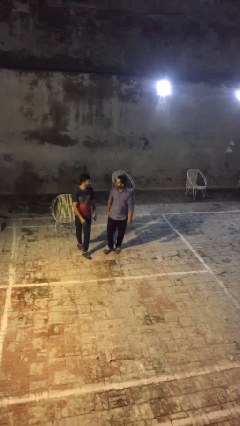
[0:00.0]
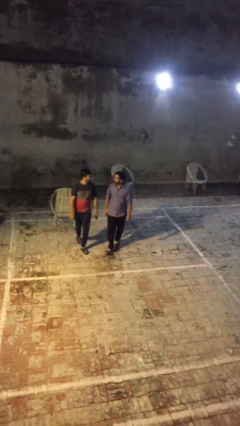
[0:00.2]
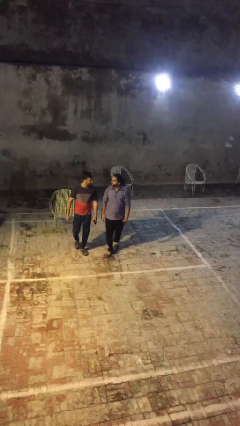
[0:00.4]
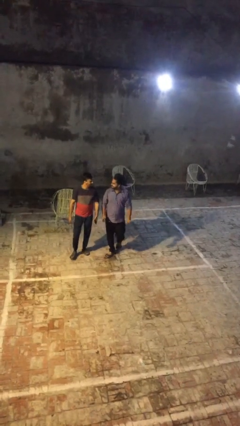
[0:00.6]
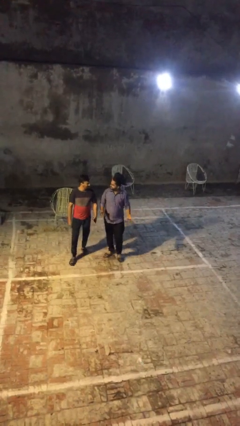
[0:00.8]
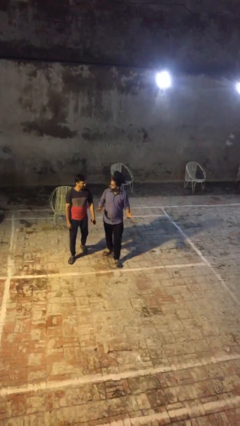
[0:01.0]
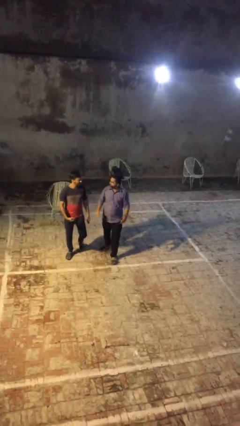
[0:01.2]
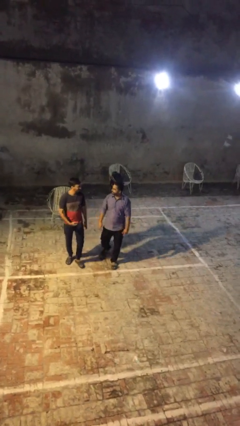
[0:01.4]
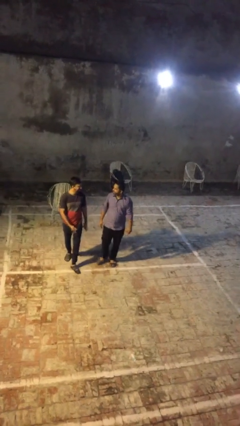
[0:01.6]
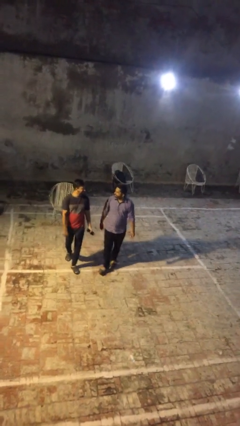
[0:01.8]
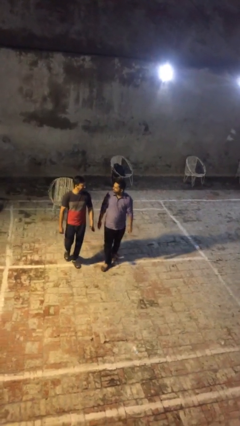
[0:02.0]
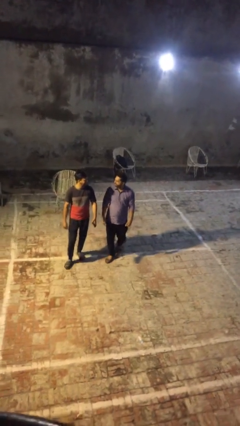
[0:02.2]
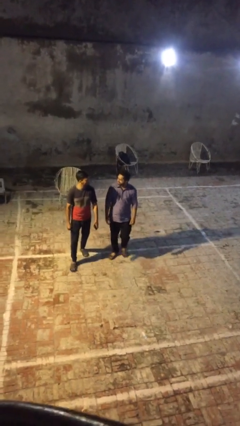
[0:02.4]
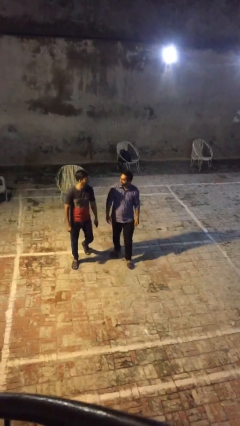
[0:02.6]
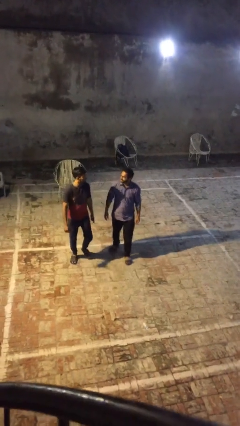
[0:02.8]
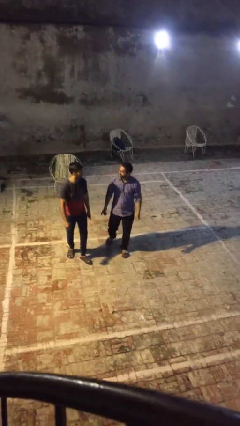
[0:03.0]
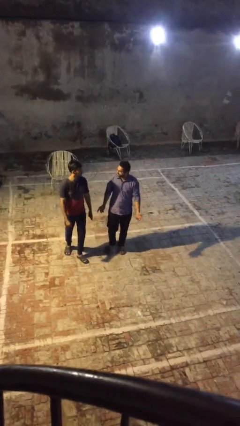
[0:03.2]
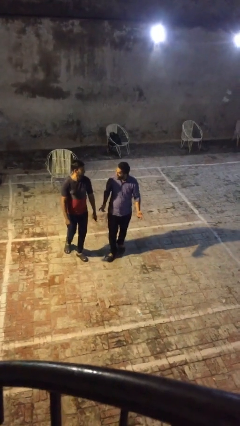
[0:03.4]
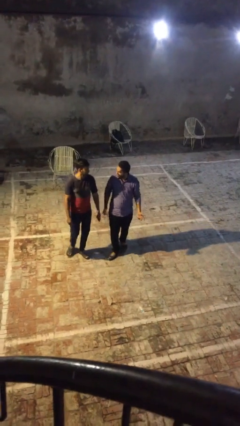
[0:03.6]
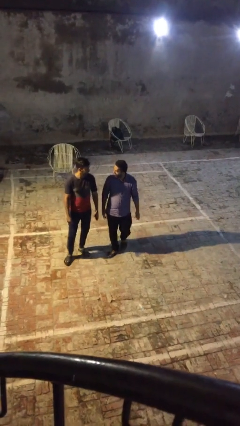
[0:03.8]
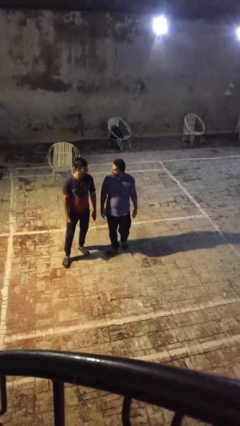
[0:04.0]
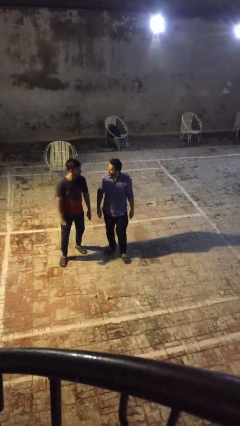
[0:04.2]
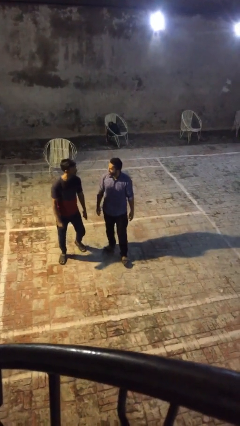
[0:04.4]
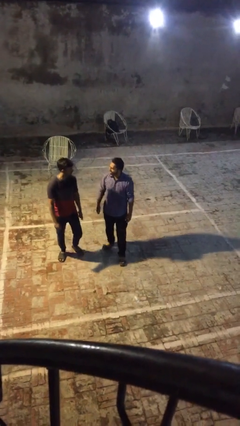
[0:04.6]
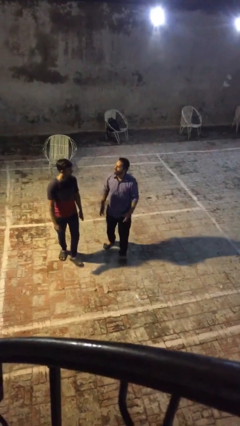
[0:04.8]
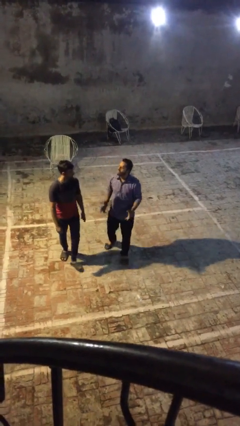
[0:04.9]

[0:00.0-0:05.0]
person talks to person

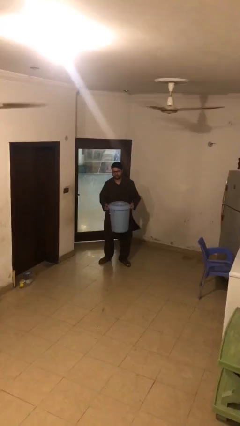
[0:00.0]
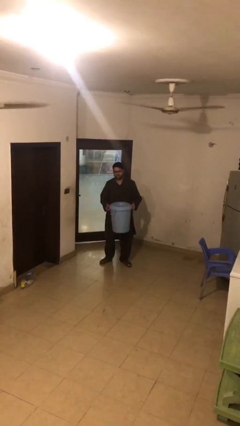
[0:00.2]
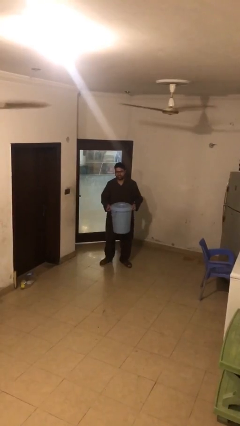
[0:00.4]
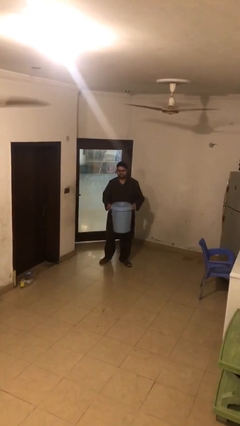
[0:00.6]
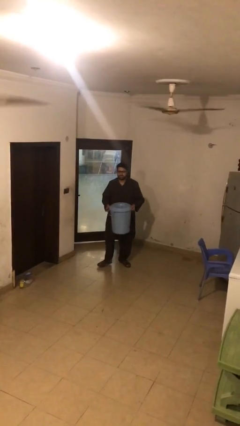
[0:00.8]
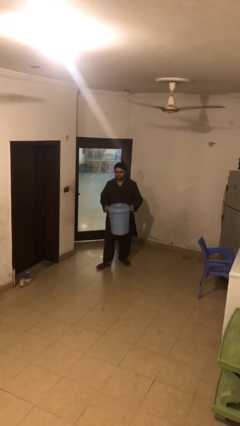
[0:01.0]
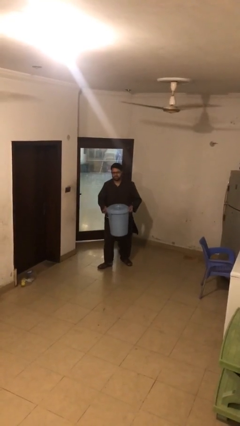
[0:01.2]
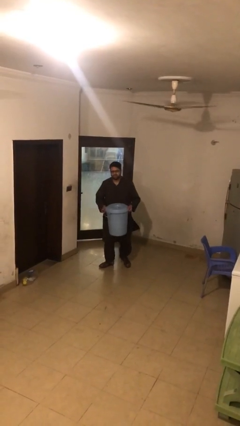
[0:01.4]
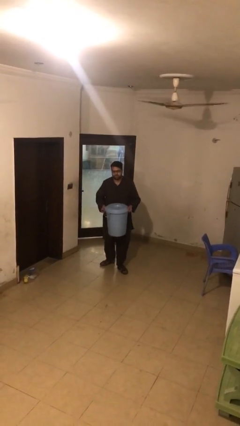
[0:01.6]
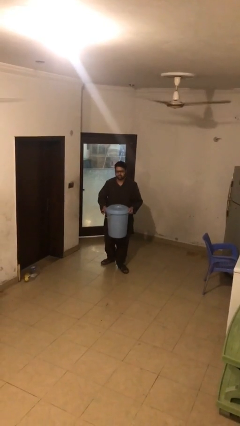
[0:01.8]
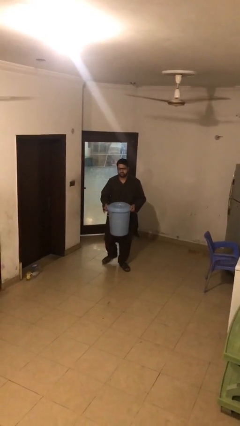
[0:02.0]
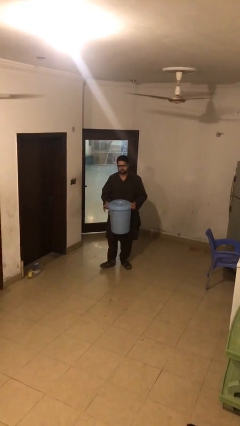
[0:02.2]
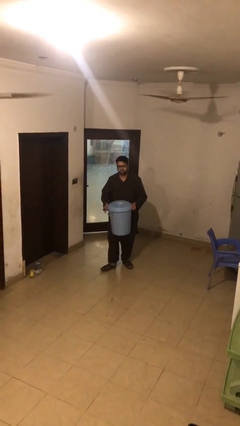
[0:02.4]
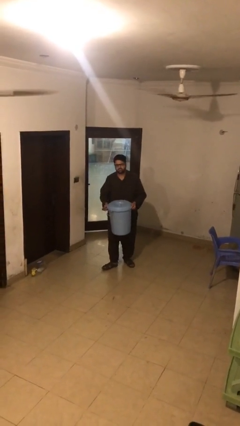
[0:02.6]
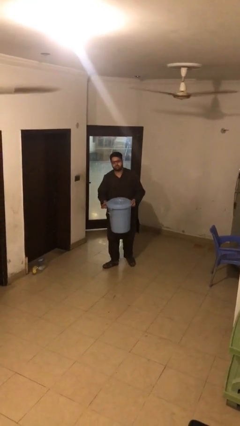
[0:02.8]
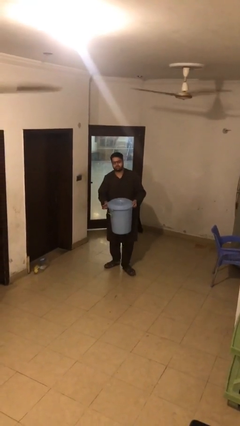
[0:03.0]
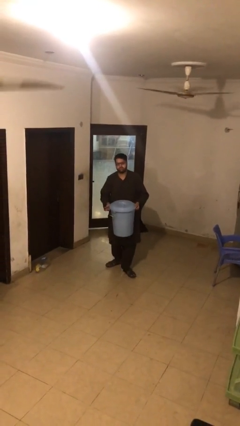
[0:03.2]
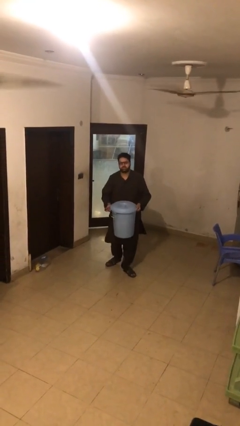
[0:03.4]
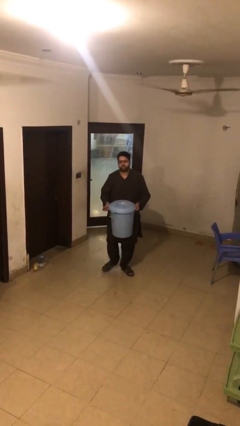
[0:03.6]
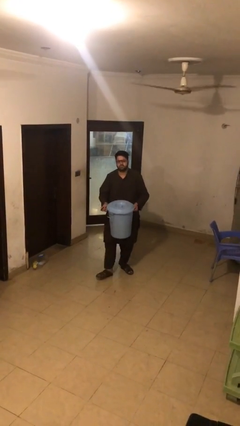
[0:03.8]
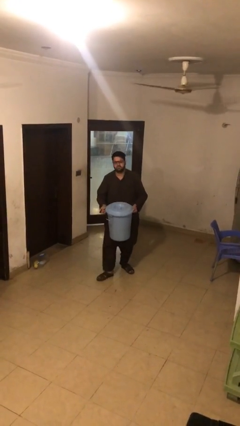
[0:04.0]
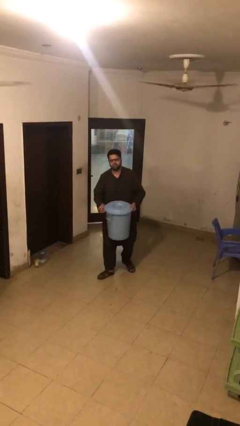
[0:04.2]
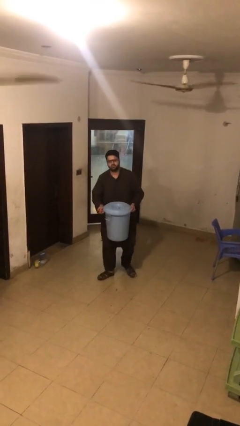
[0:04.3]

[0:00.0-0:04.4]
person carries heavy object

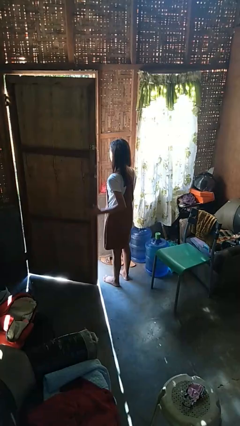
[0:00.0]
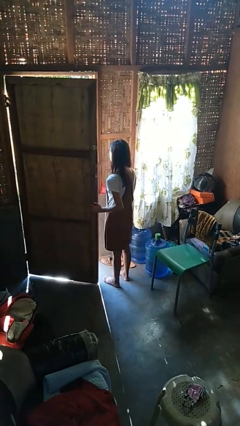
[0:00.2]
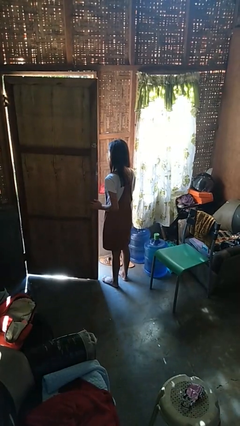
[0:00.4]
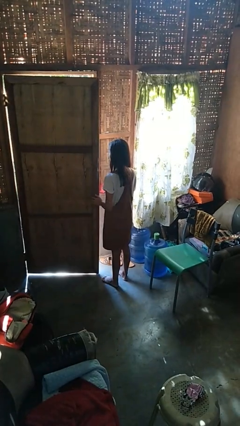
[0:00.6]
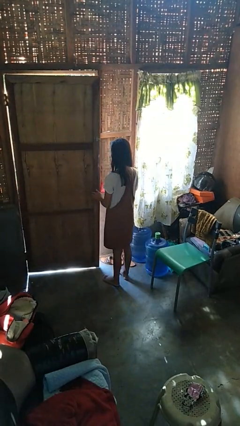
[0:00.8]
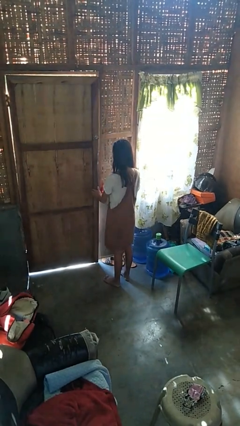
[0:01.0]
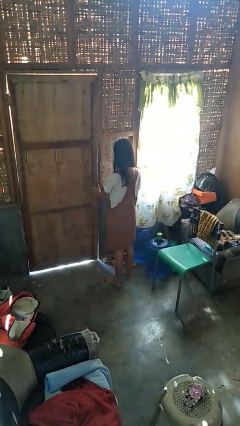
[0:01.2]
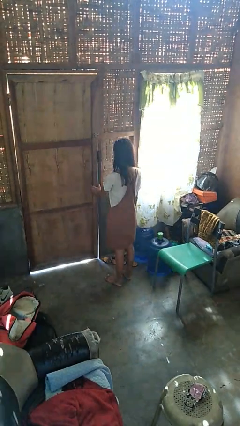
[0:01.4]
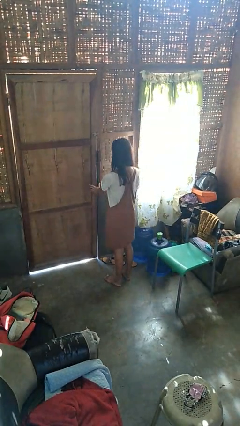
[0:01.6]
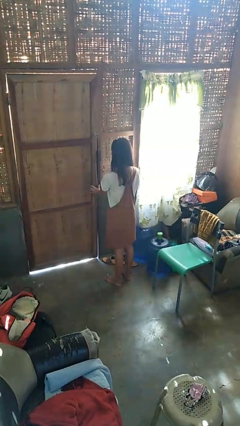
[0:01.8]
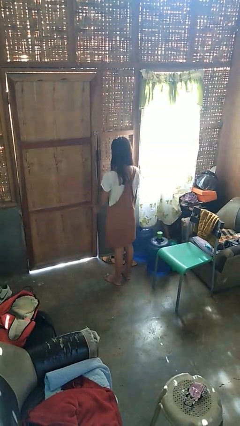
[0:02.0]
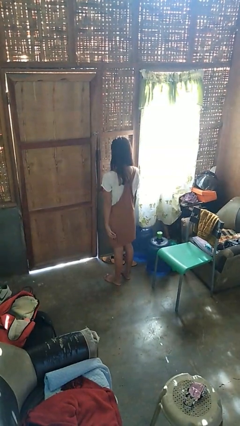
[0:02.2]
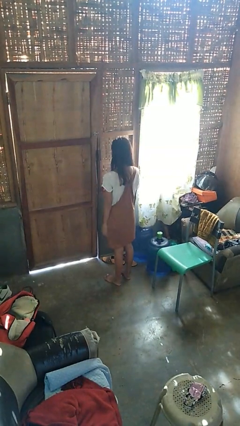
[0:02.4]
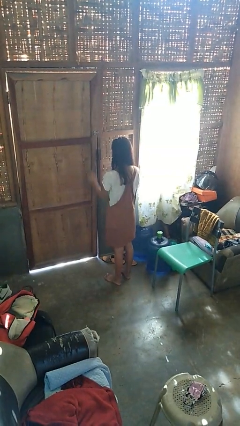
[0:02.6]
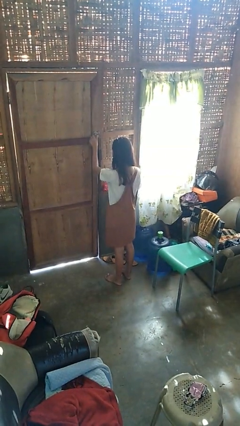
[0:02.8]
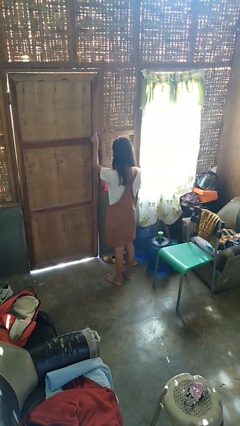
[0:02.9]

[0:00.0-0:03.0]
person closes facility door

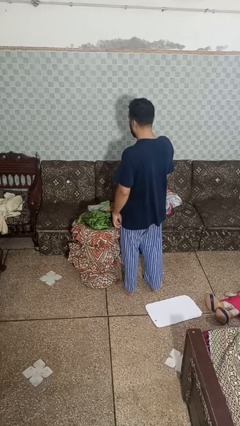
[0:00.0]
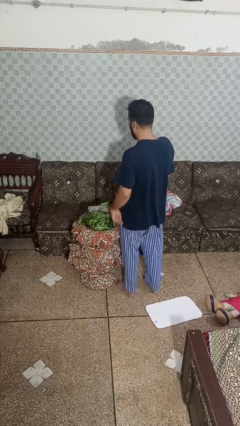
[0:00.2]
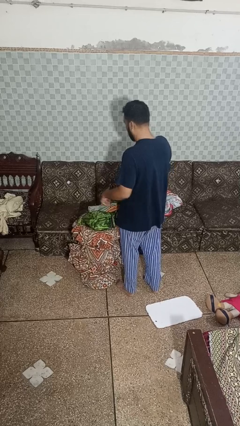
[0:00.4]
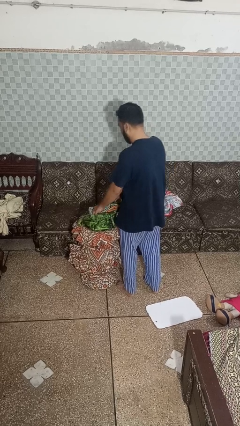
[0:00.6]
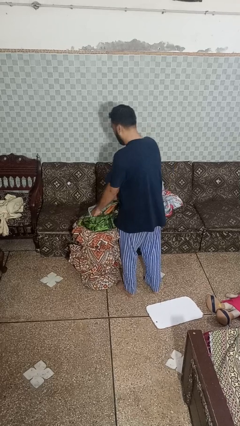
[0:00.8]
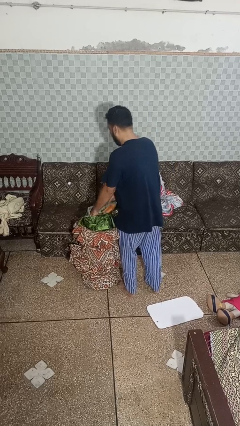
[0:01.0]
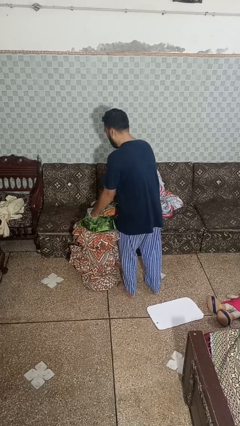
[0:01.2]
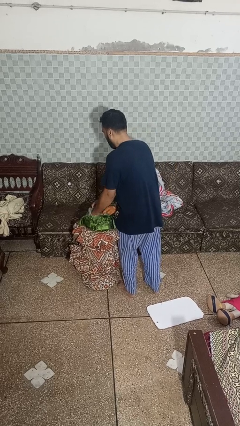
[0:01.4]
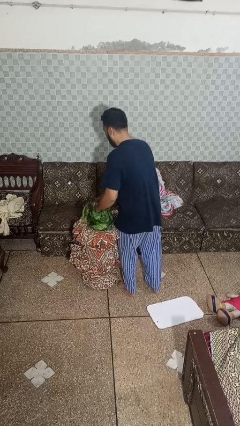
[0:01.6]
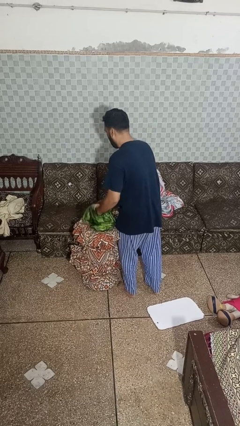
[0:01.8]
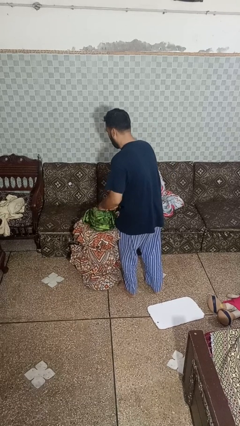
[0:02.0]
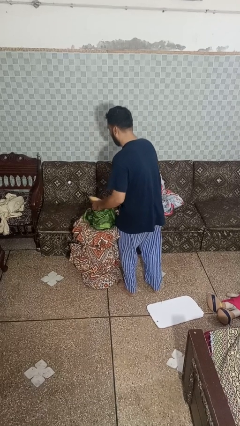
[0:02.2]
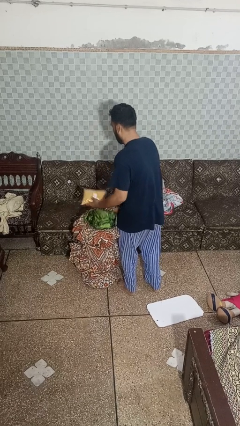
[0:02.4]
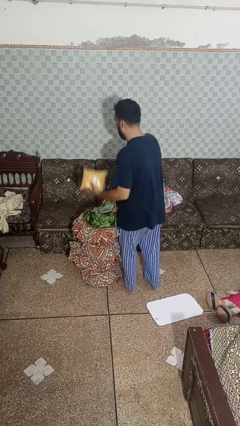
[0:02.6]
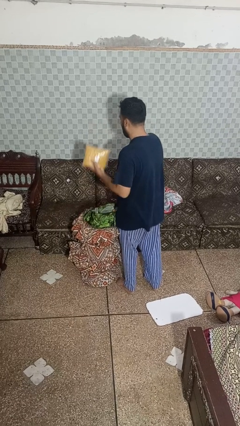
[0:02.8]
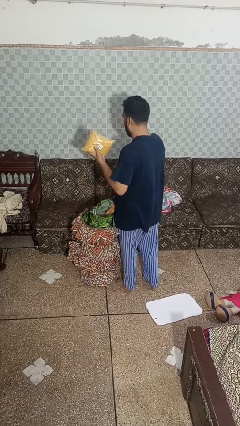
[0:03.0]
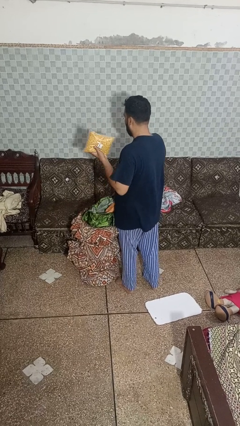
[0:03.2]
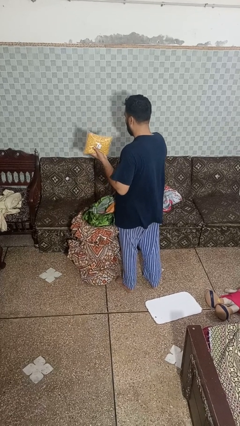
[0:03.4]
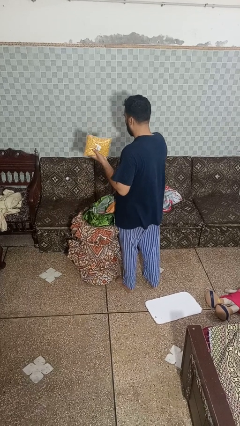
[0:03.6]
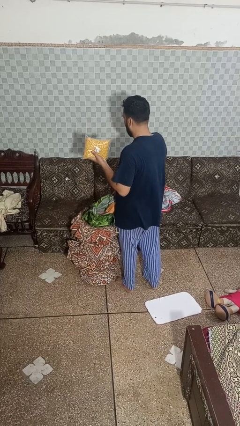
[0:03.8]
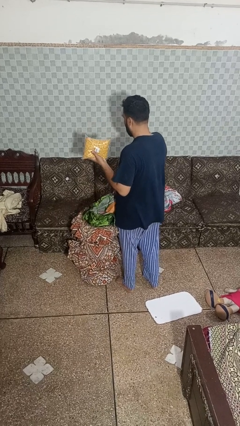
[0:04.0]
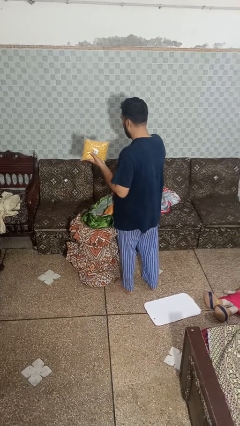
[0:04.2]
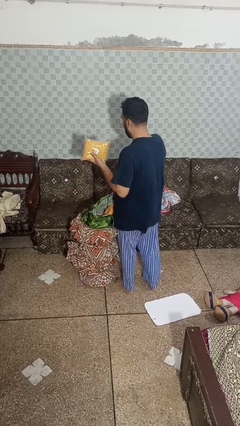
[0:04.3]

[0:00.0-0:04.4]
person takes object from bag

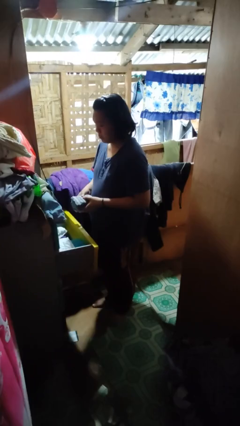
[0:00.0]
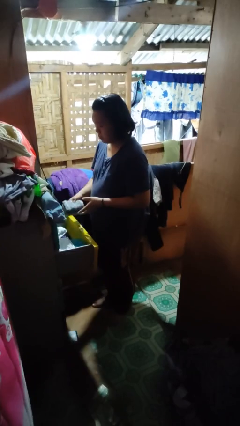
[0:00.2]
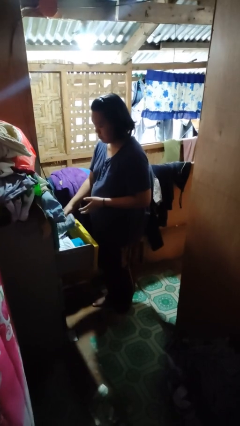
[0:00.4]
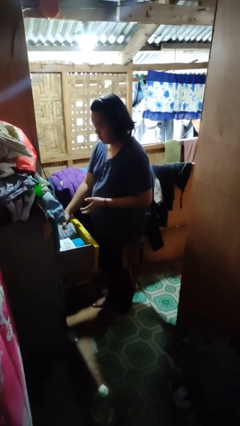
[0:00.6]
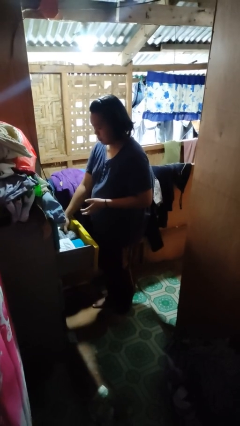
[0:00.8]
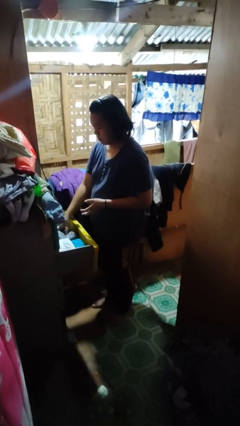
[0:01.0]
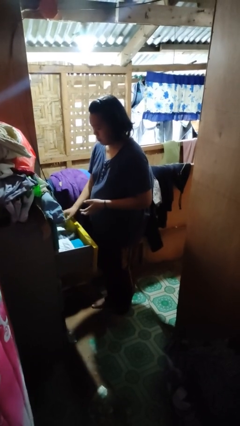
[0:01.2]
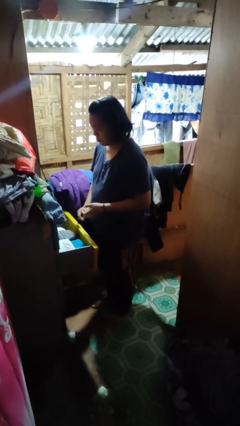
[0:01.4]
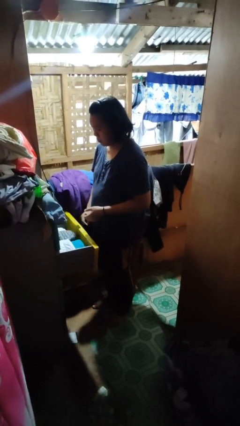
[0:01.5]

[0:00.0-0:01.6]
person puts clothes into dresser
